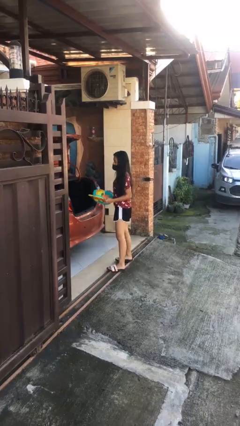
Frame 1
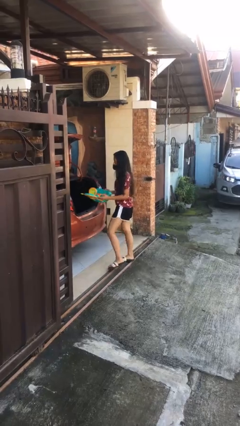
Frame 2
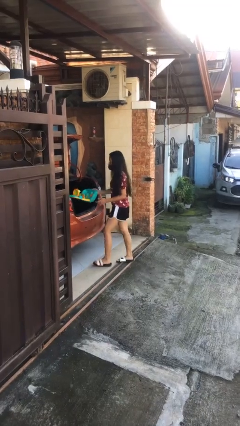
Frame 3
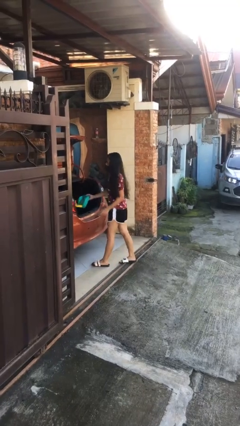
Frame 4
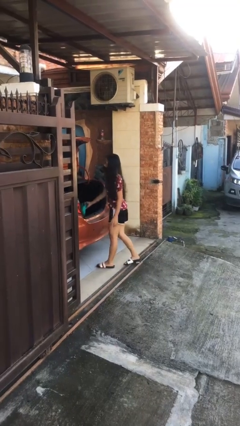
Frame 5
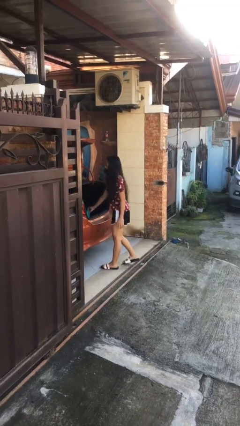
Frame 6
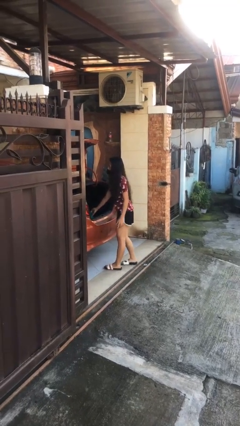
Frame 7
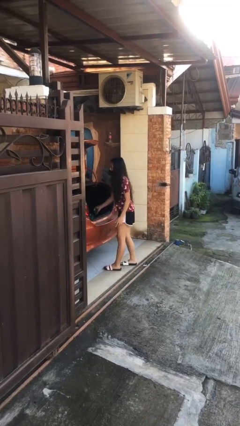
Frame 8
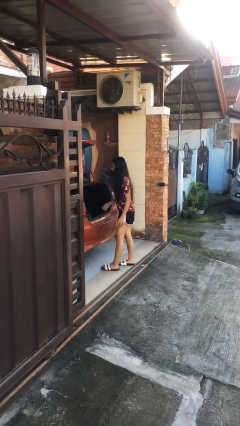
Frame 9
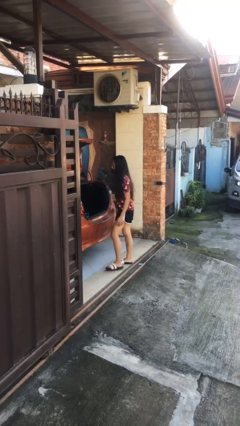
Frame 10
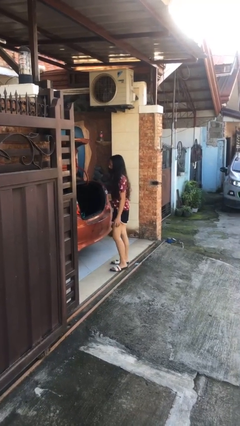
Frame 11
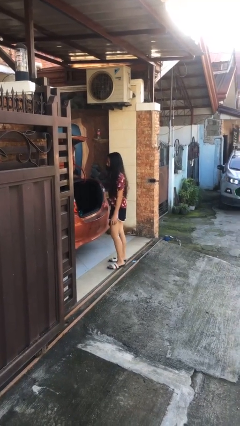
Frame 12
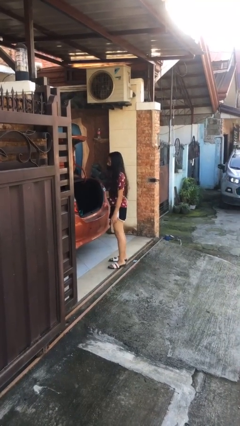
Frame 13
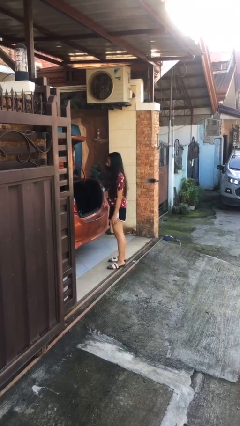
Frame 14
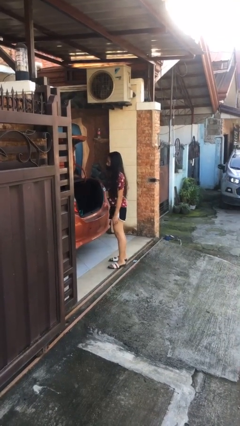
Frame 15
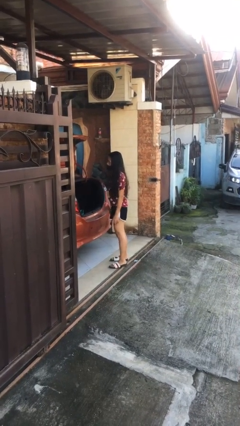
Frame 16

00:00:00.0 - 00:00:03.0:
person loads car

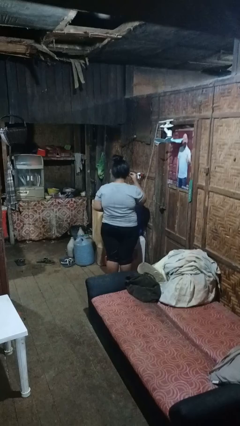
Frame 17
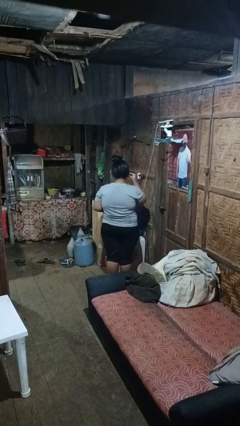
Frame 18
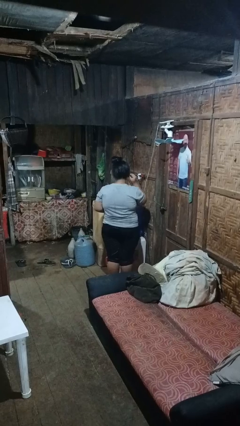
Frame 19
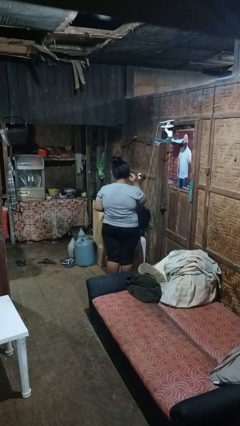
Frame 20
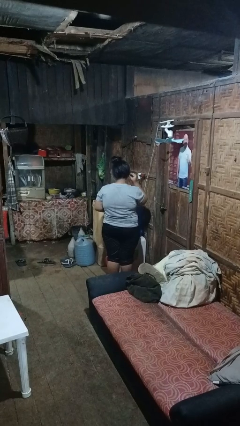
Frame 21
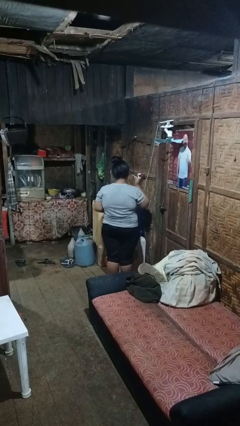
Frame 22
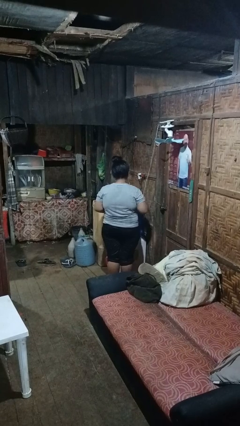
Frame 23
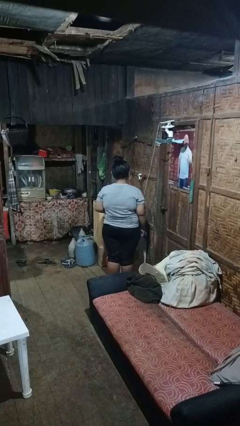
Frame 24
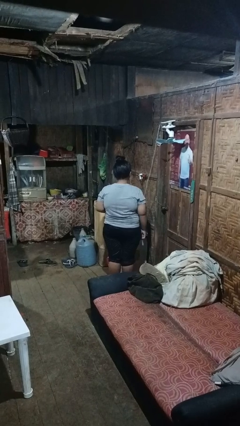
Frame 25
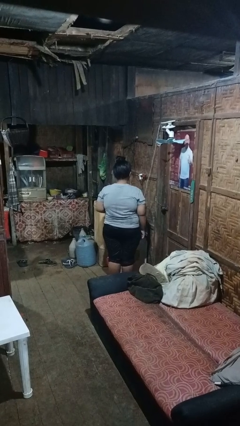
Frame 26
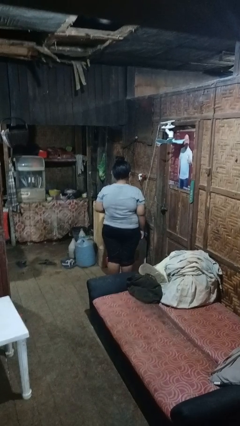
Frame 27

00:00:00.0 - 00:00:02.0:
person puts on headphones

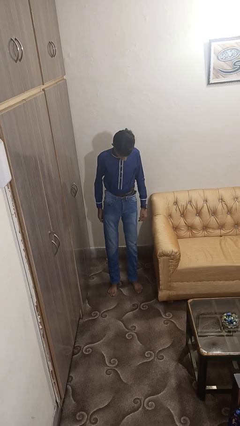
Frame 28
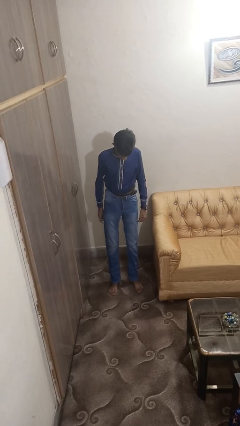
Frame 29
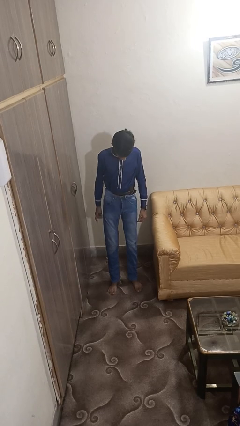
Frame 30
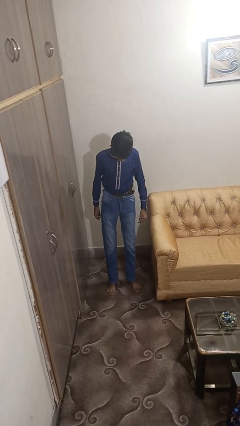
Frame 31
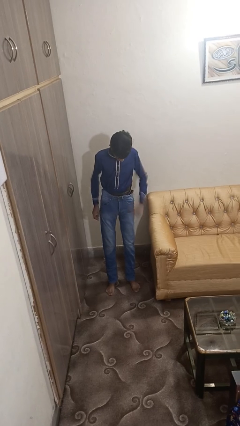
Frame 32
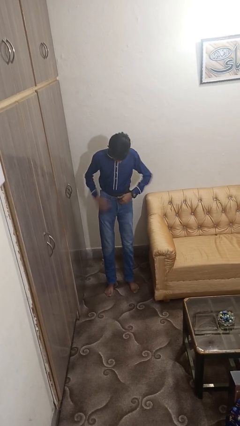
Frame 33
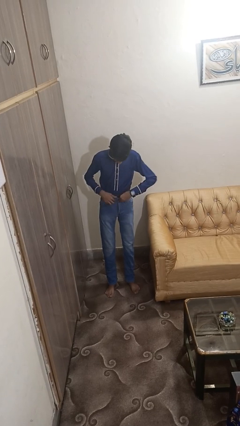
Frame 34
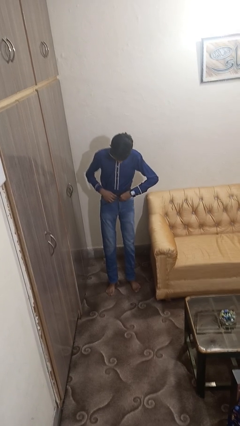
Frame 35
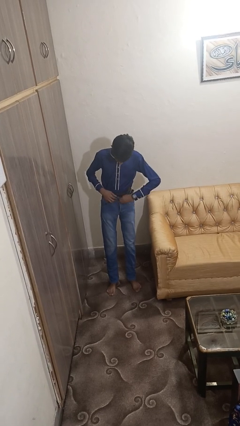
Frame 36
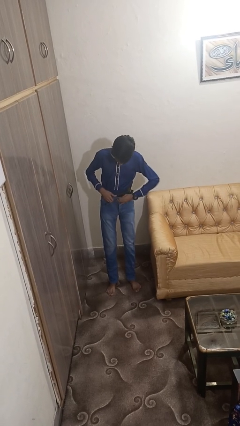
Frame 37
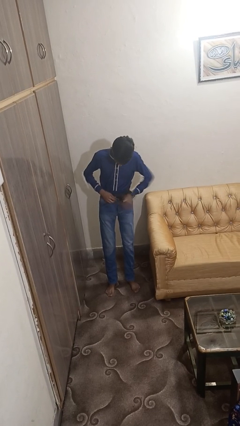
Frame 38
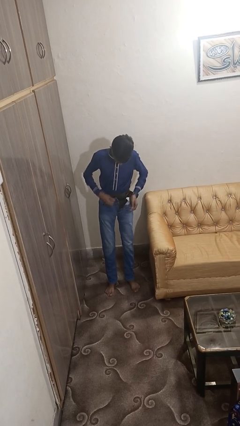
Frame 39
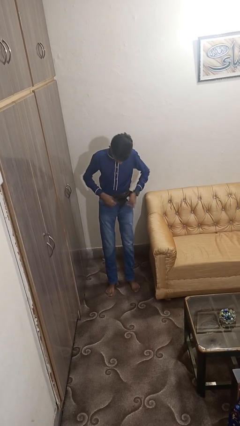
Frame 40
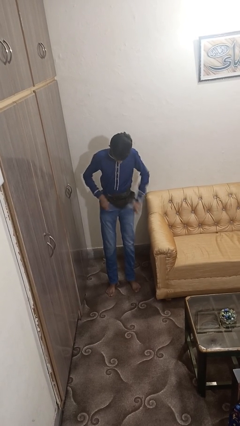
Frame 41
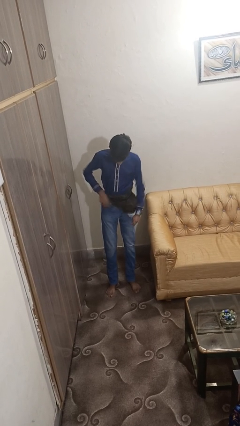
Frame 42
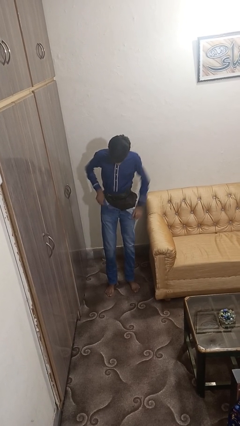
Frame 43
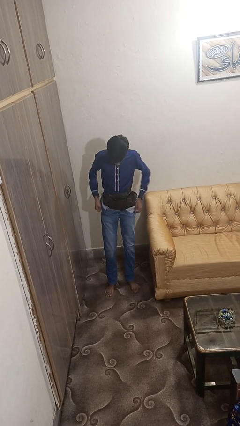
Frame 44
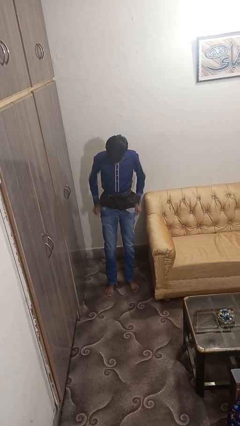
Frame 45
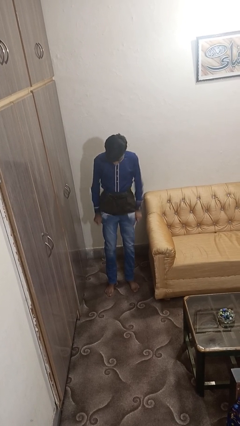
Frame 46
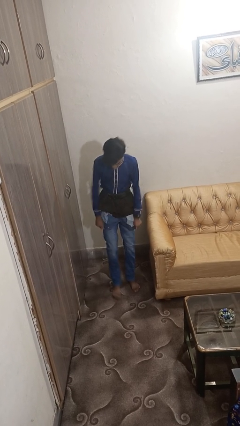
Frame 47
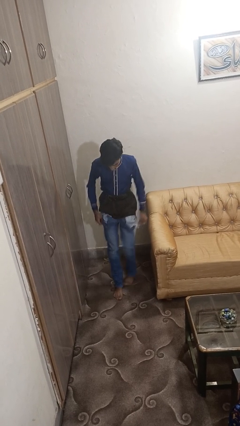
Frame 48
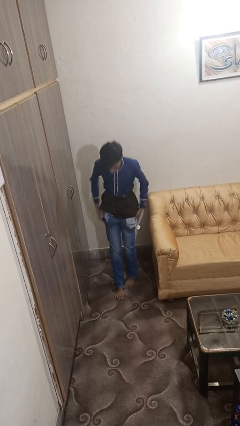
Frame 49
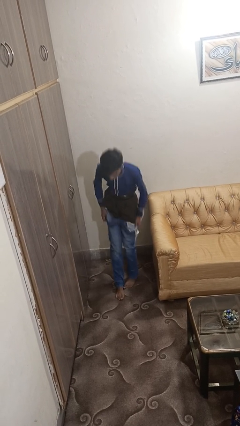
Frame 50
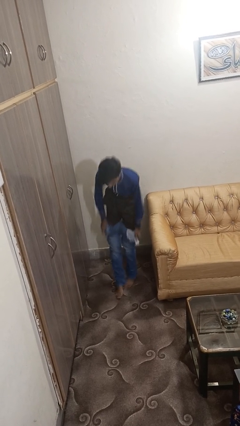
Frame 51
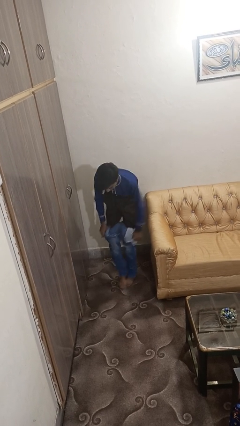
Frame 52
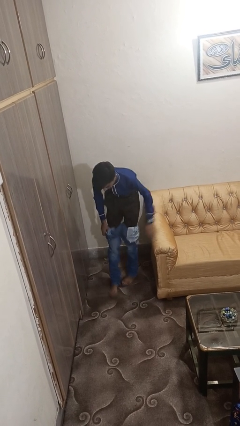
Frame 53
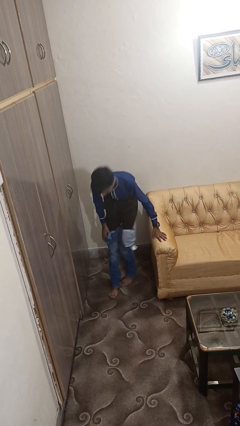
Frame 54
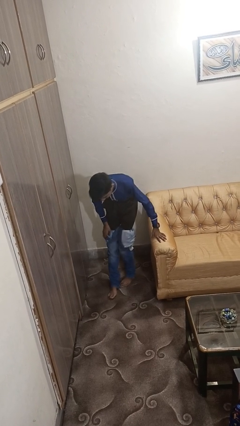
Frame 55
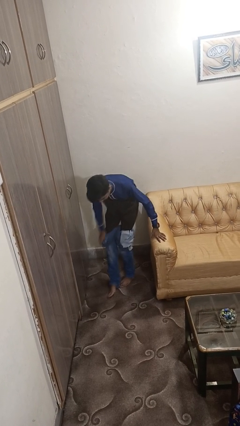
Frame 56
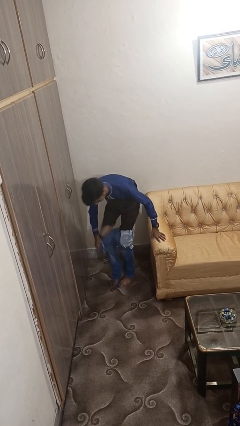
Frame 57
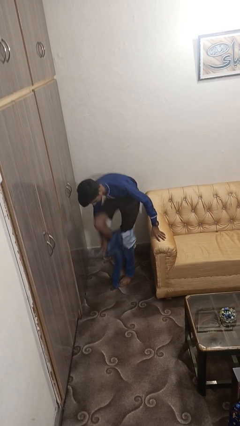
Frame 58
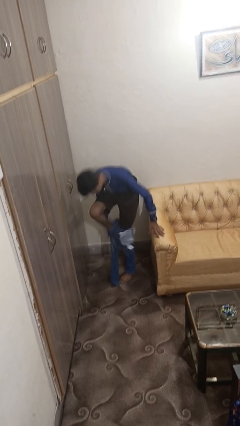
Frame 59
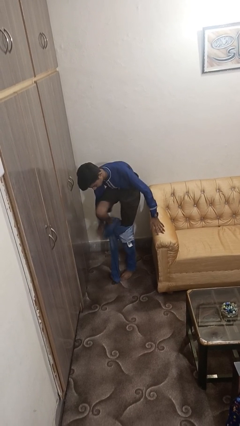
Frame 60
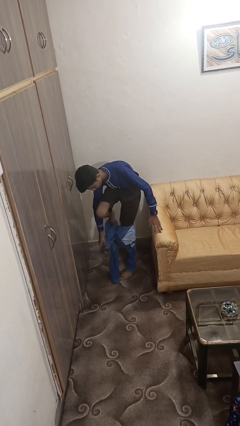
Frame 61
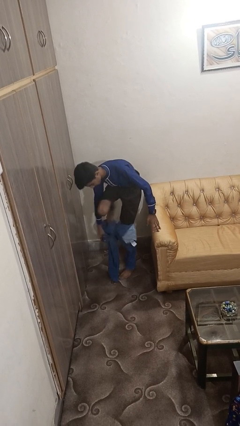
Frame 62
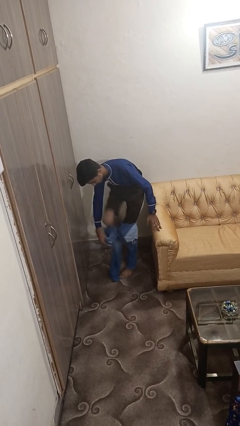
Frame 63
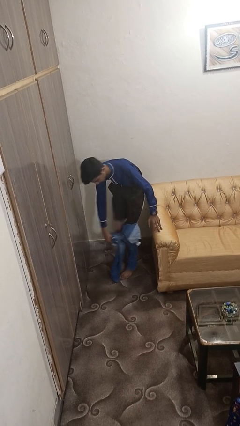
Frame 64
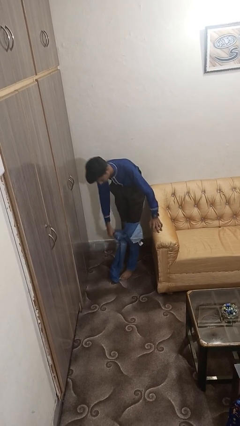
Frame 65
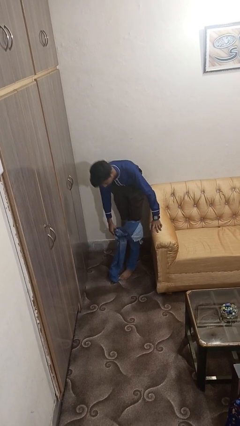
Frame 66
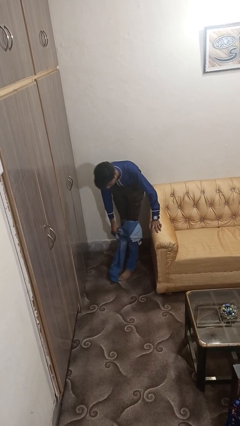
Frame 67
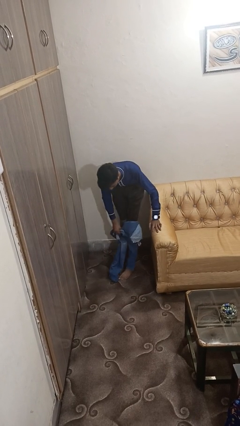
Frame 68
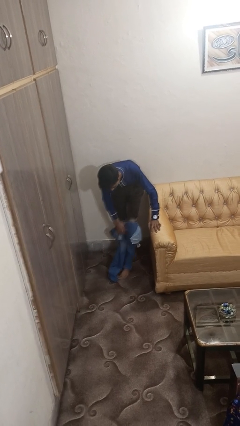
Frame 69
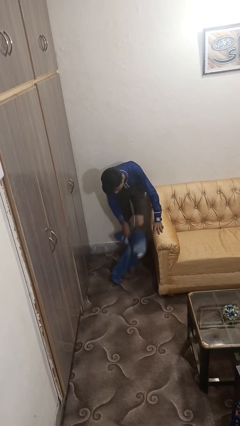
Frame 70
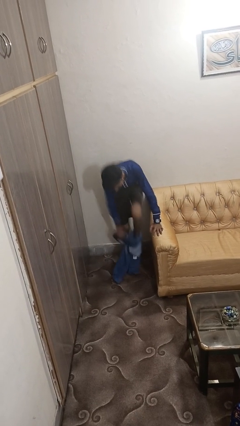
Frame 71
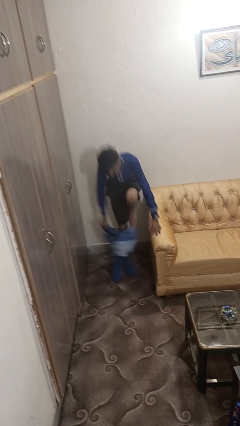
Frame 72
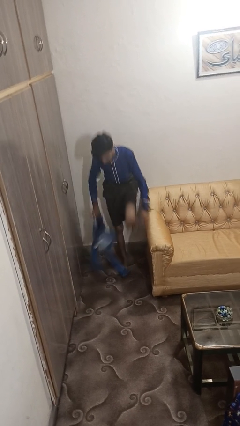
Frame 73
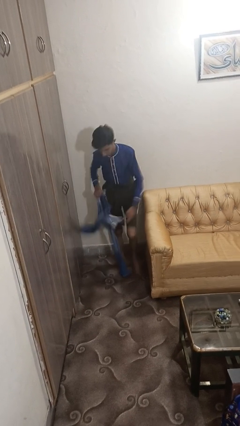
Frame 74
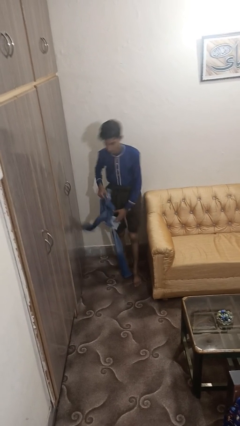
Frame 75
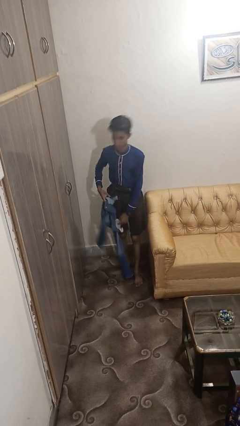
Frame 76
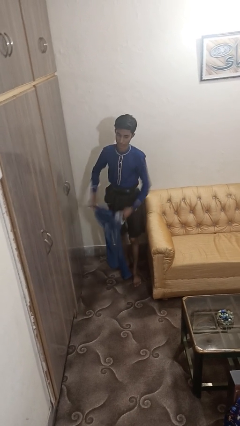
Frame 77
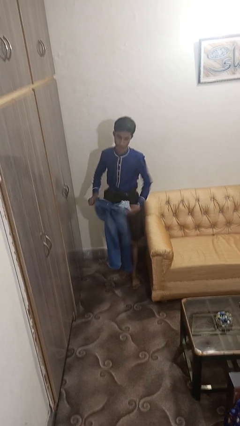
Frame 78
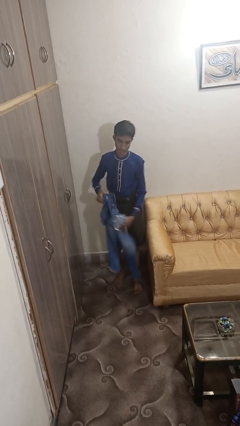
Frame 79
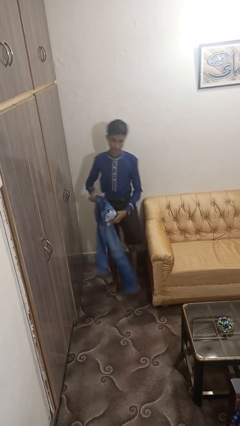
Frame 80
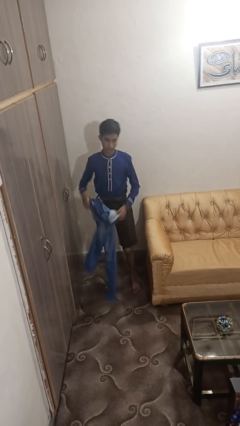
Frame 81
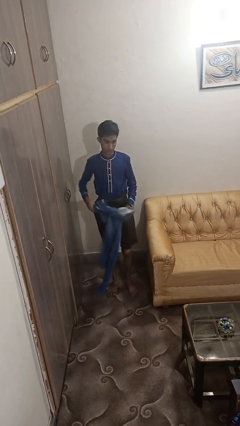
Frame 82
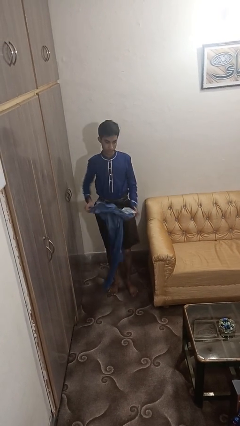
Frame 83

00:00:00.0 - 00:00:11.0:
person takes off pants

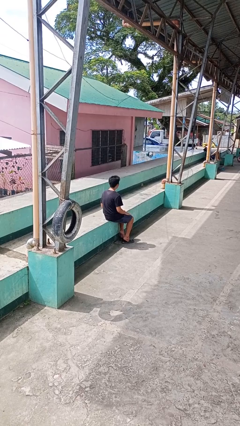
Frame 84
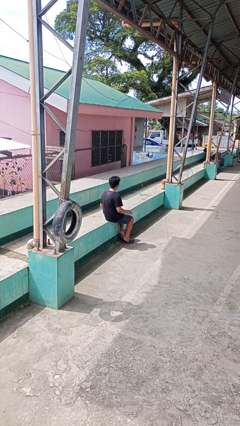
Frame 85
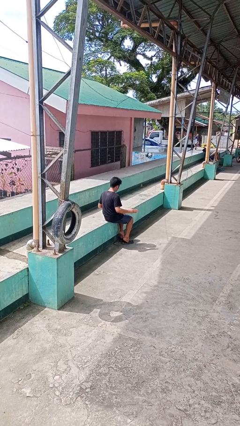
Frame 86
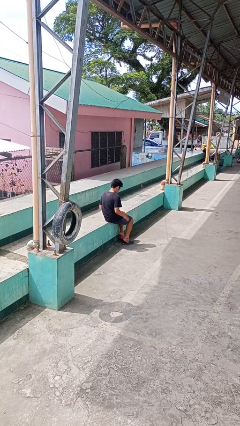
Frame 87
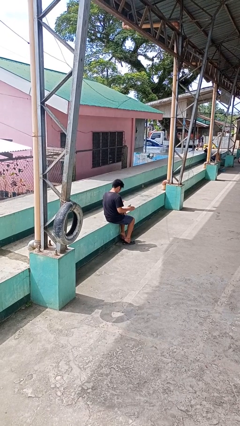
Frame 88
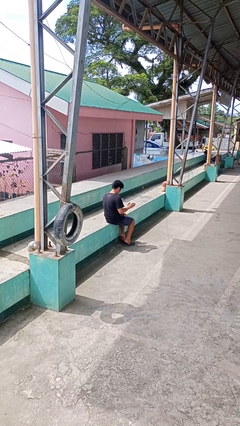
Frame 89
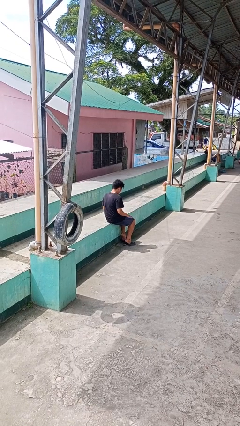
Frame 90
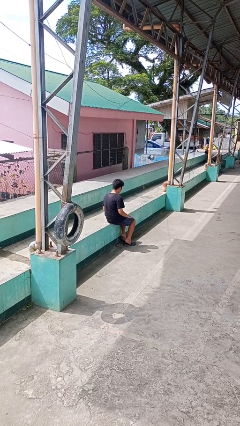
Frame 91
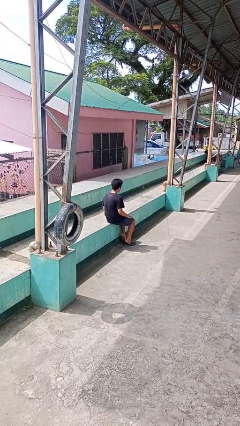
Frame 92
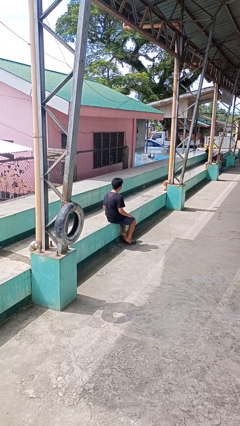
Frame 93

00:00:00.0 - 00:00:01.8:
person slaps hands on thighs
